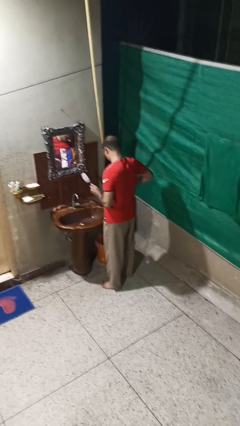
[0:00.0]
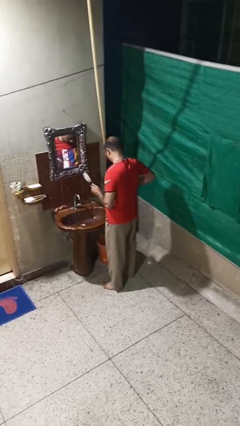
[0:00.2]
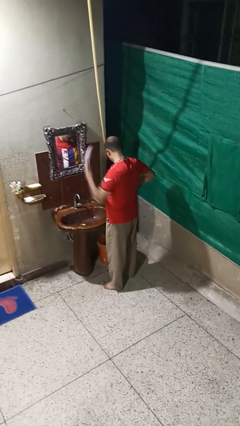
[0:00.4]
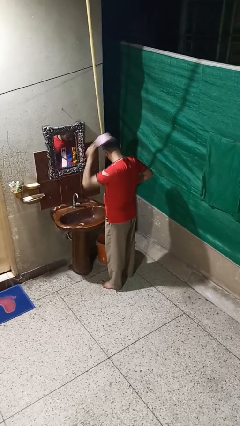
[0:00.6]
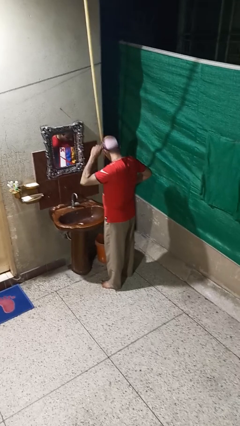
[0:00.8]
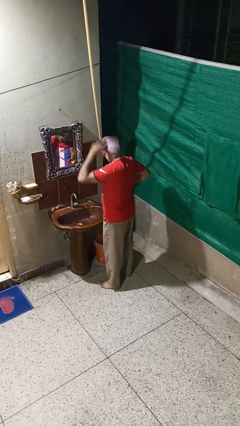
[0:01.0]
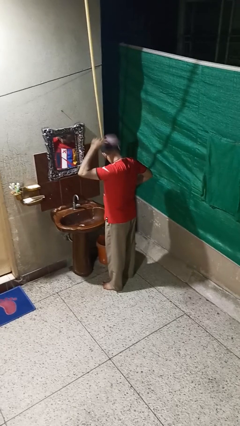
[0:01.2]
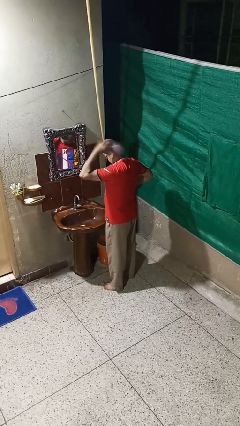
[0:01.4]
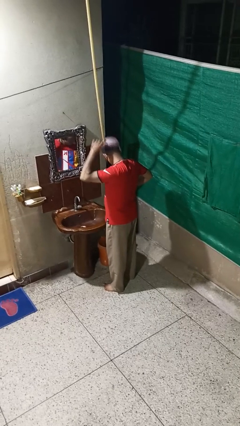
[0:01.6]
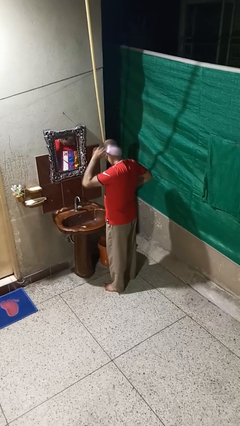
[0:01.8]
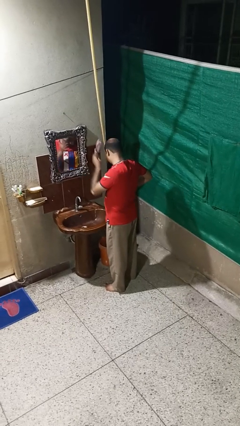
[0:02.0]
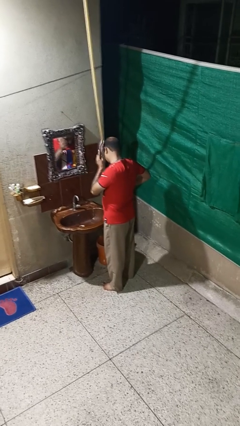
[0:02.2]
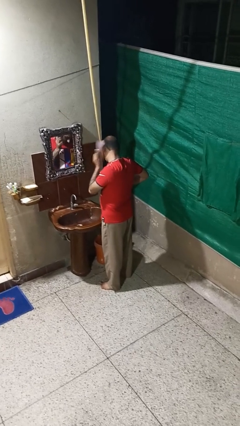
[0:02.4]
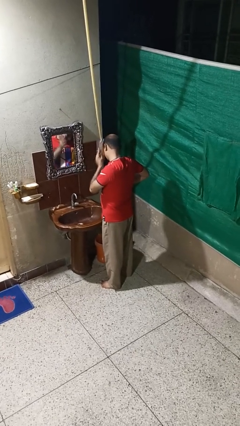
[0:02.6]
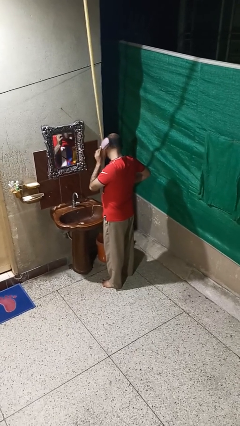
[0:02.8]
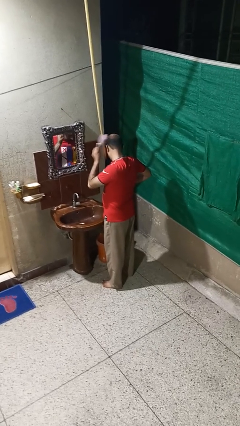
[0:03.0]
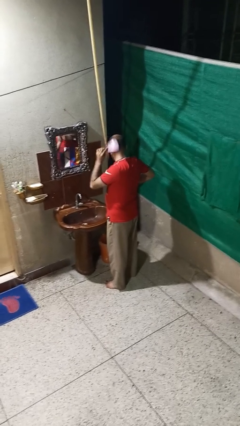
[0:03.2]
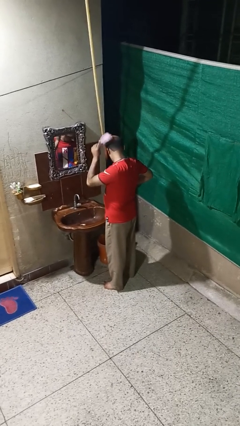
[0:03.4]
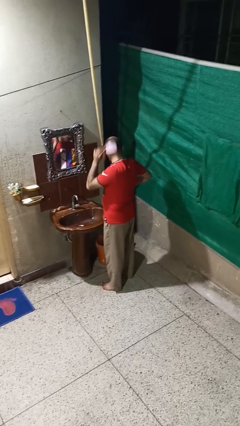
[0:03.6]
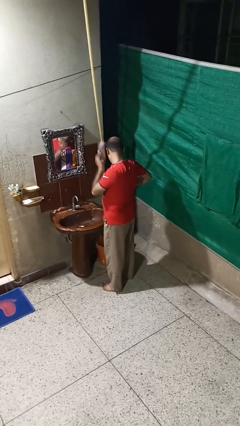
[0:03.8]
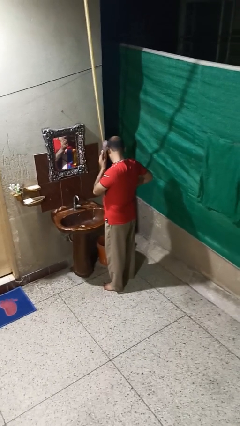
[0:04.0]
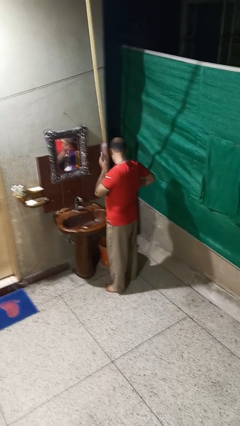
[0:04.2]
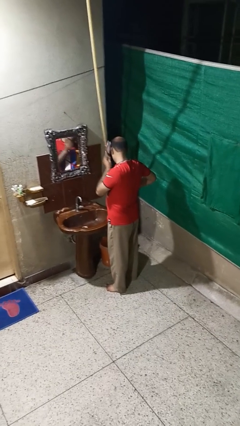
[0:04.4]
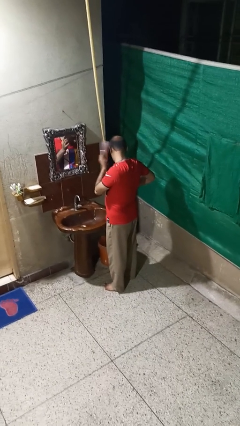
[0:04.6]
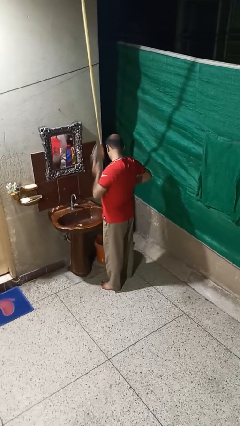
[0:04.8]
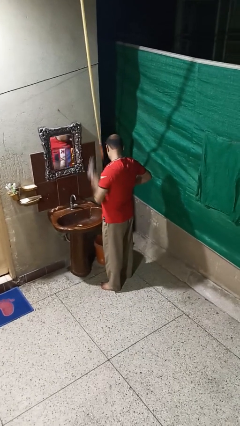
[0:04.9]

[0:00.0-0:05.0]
person brushes hair

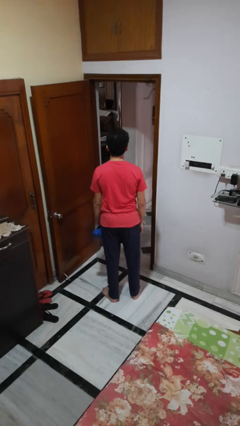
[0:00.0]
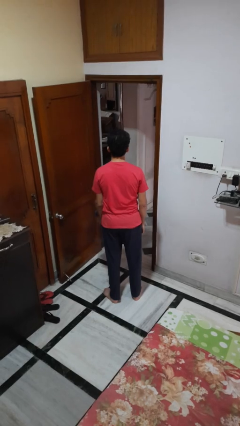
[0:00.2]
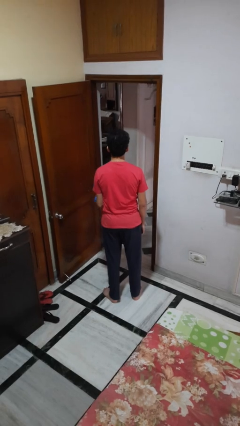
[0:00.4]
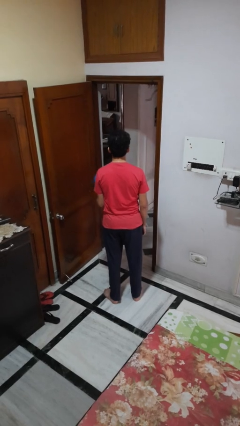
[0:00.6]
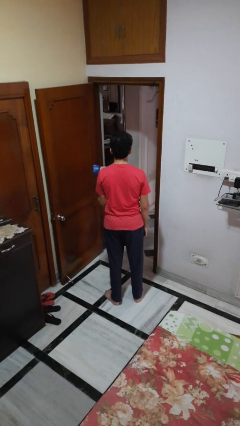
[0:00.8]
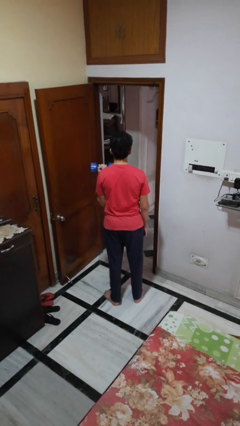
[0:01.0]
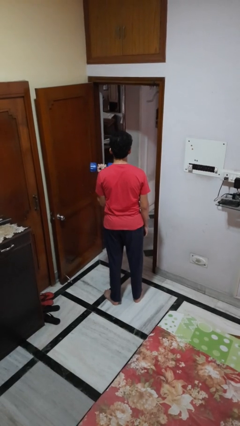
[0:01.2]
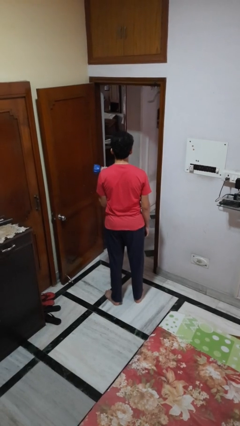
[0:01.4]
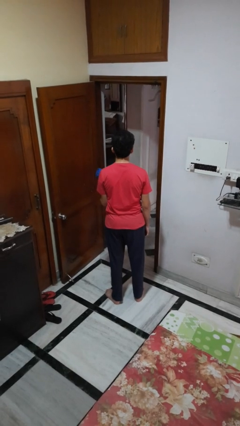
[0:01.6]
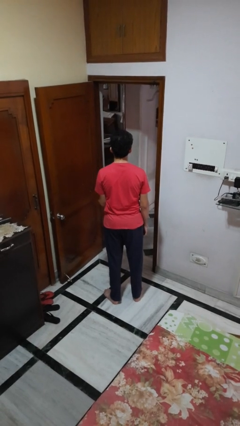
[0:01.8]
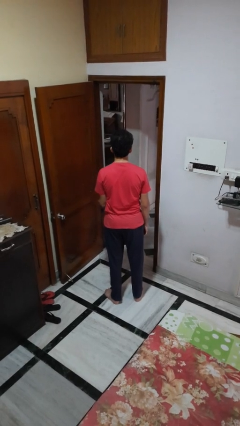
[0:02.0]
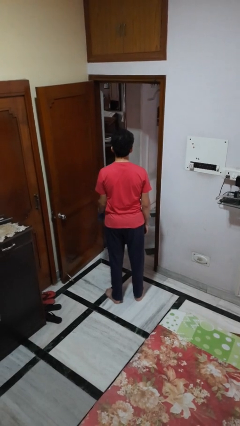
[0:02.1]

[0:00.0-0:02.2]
person lifts dumbbells

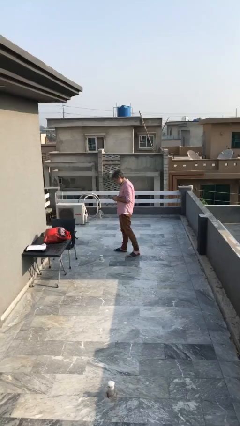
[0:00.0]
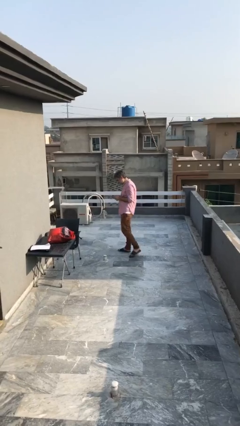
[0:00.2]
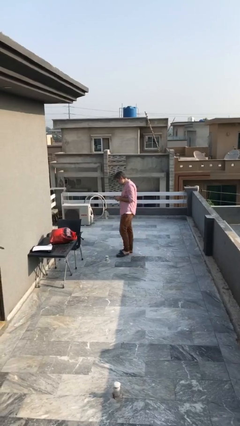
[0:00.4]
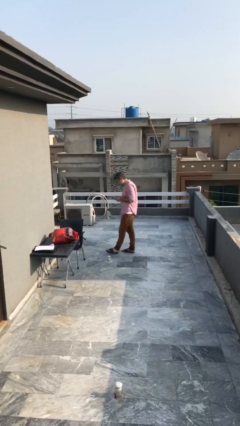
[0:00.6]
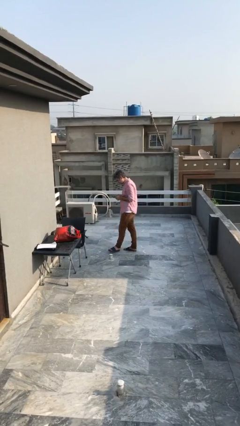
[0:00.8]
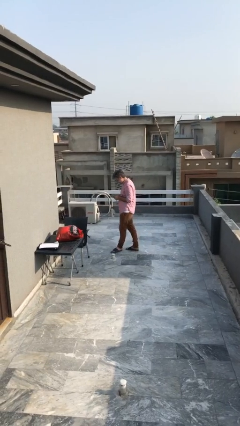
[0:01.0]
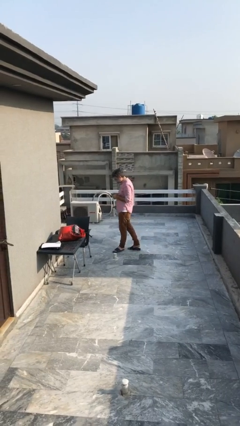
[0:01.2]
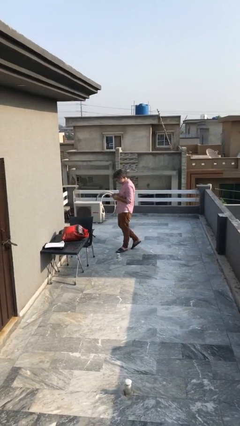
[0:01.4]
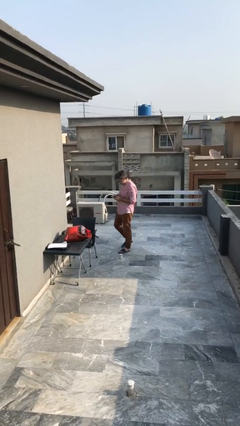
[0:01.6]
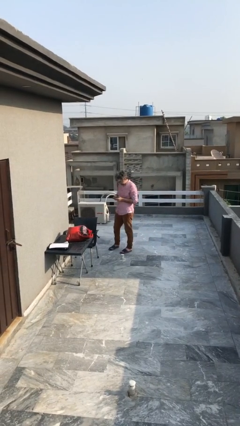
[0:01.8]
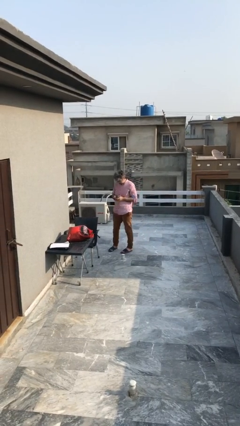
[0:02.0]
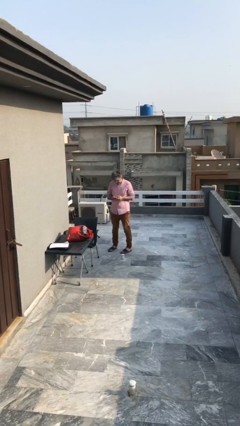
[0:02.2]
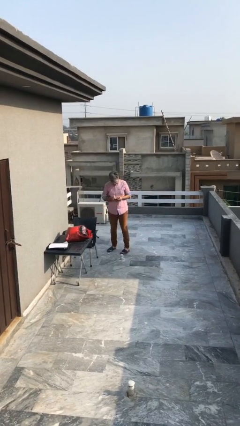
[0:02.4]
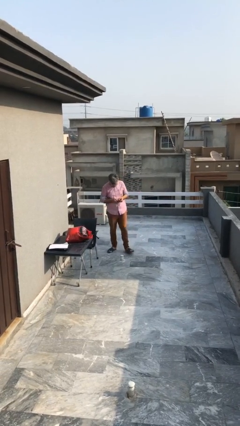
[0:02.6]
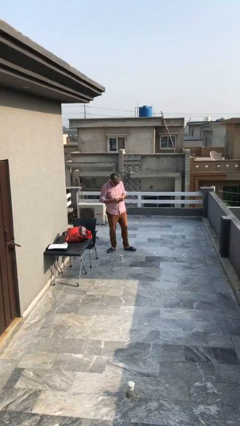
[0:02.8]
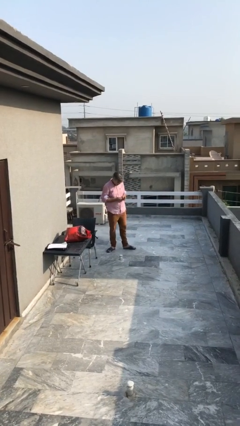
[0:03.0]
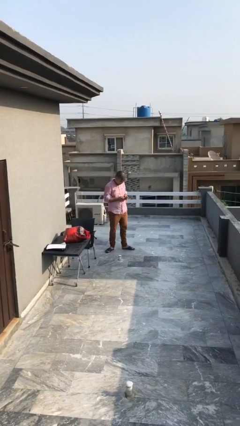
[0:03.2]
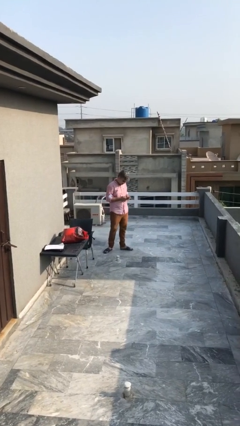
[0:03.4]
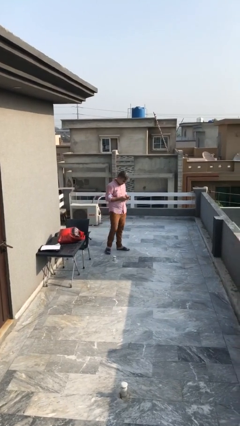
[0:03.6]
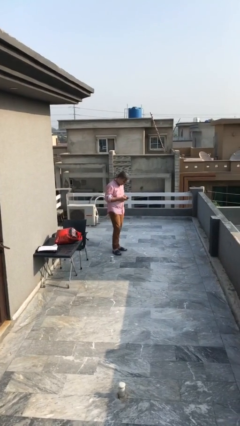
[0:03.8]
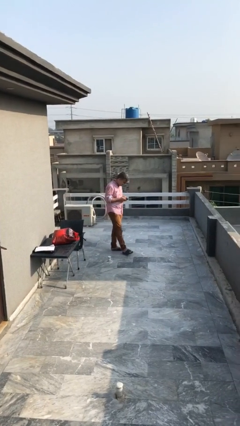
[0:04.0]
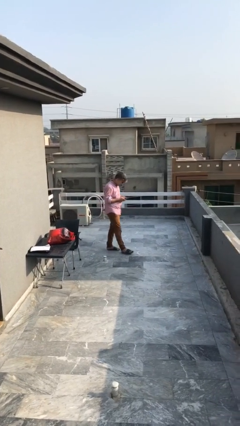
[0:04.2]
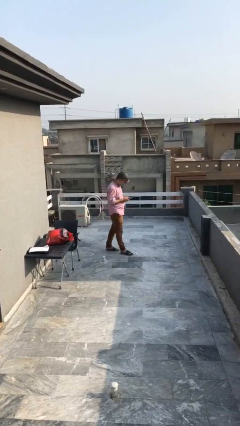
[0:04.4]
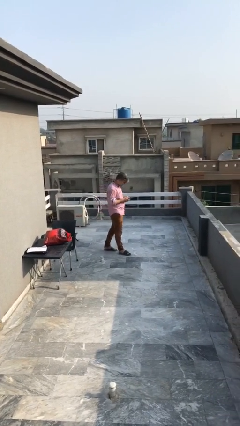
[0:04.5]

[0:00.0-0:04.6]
person texts on phone

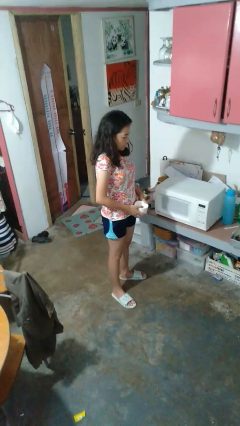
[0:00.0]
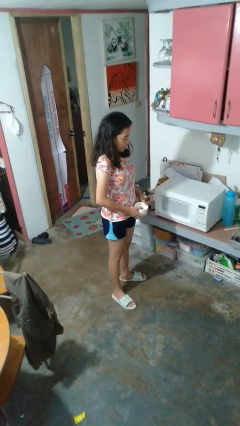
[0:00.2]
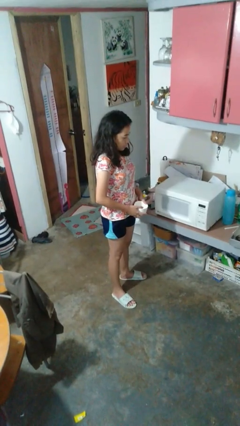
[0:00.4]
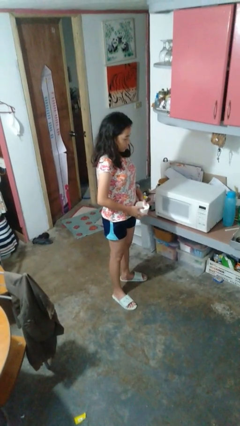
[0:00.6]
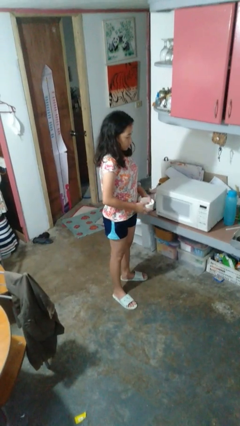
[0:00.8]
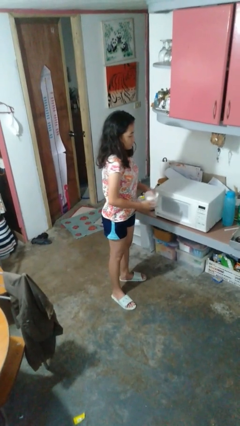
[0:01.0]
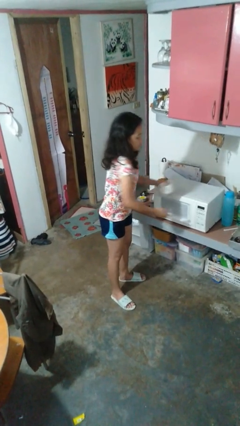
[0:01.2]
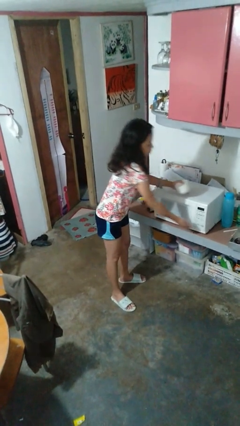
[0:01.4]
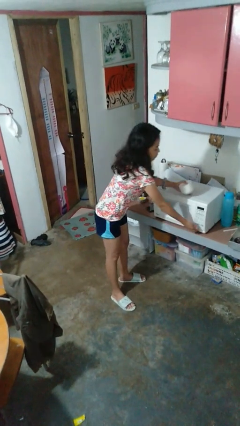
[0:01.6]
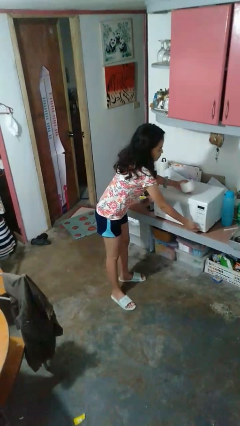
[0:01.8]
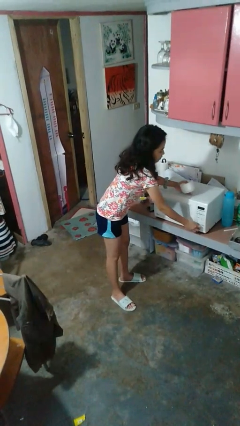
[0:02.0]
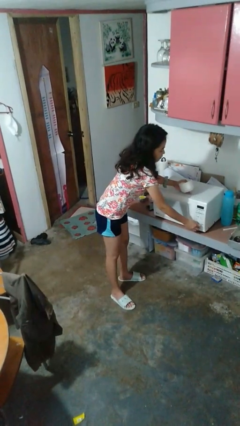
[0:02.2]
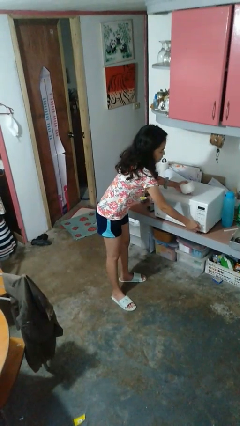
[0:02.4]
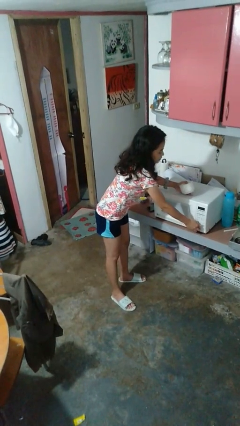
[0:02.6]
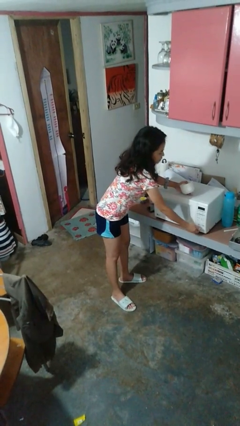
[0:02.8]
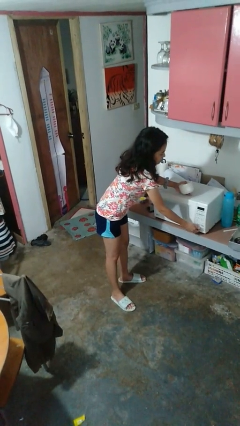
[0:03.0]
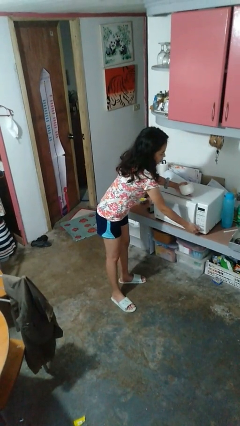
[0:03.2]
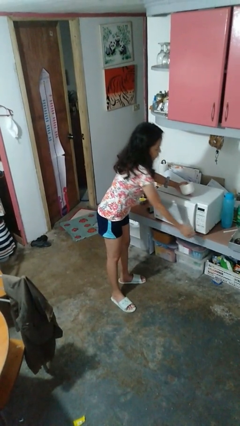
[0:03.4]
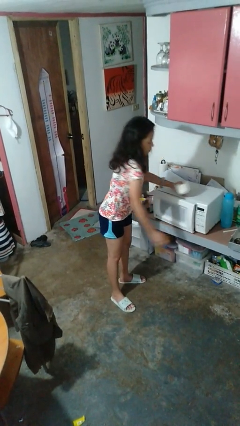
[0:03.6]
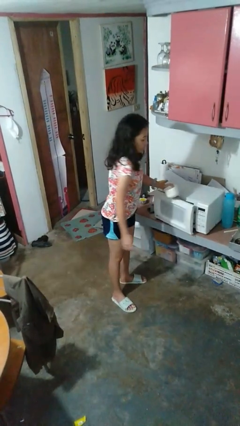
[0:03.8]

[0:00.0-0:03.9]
person opens microwave

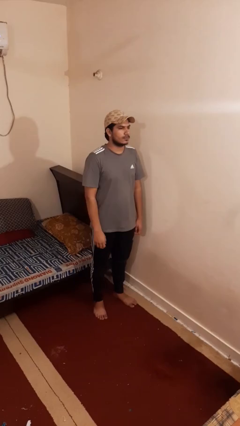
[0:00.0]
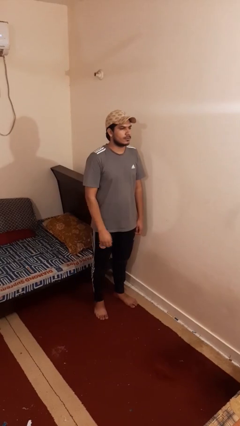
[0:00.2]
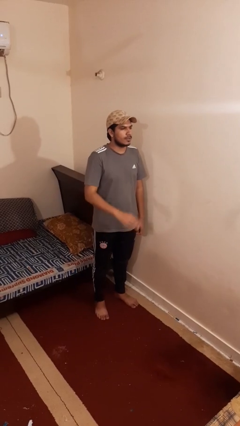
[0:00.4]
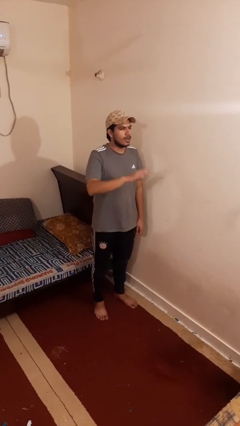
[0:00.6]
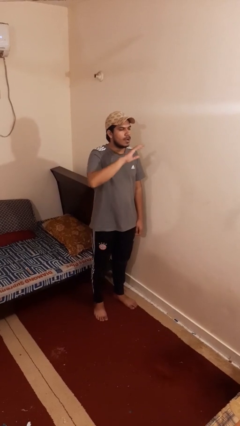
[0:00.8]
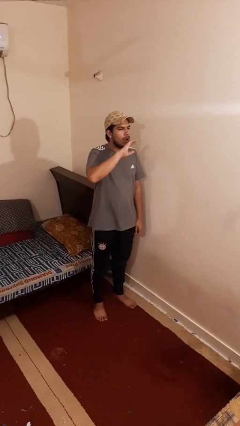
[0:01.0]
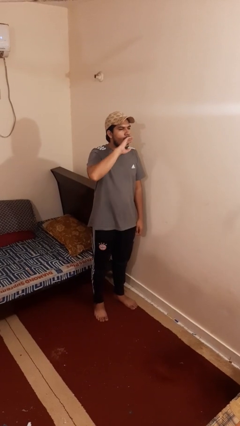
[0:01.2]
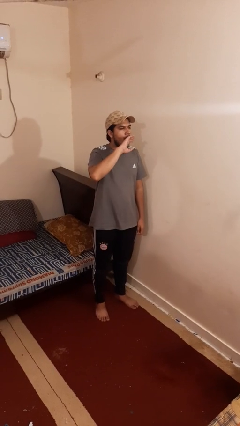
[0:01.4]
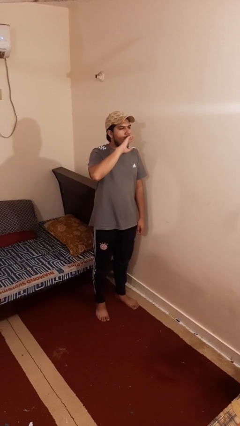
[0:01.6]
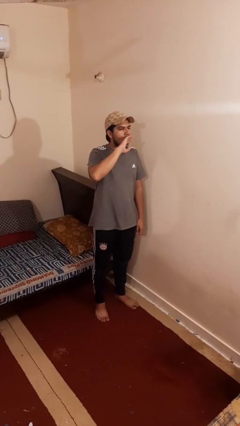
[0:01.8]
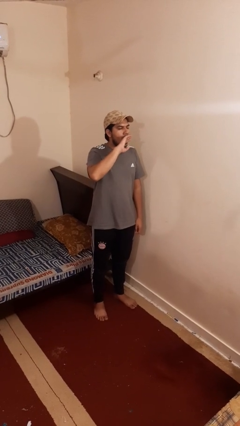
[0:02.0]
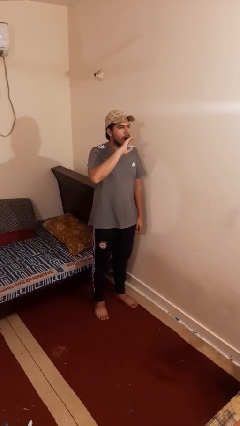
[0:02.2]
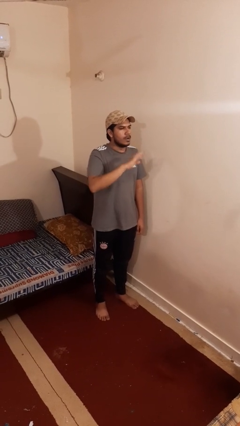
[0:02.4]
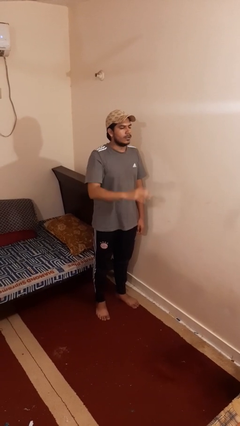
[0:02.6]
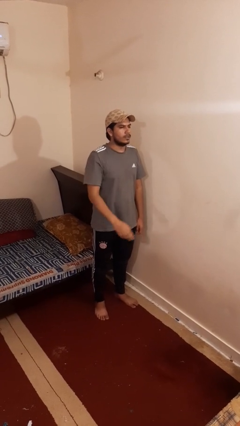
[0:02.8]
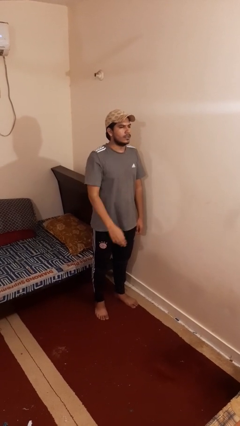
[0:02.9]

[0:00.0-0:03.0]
person yawns
